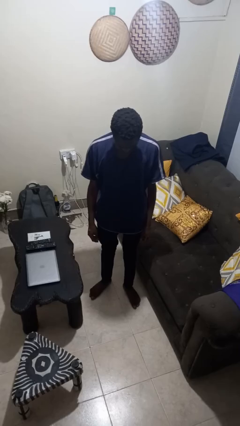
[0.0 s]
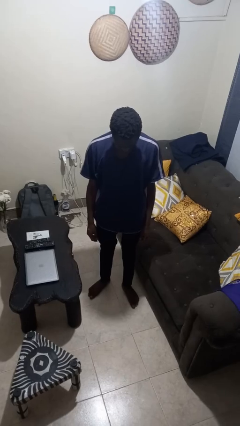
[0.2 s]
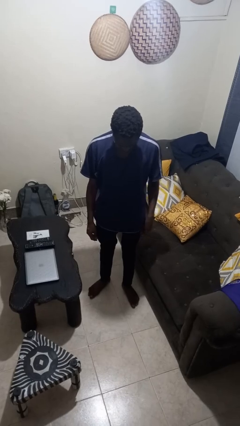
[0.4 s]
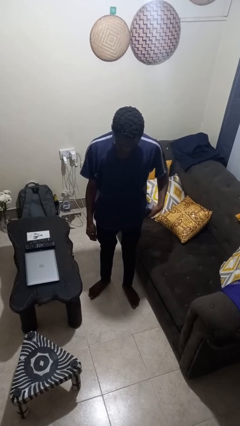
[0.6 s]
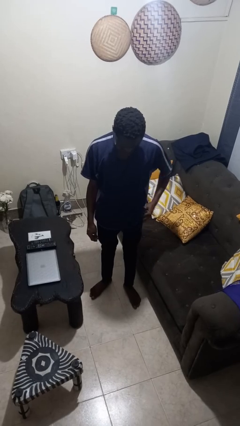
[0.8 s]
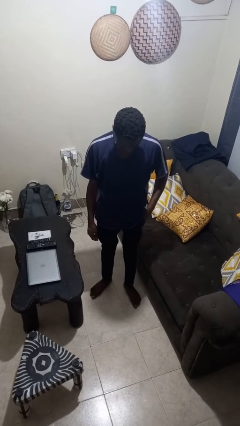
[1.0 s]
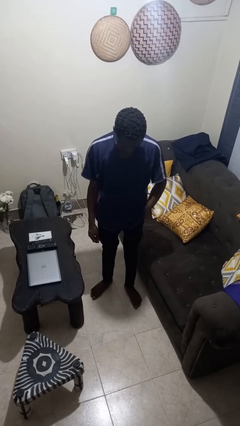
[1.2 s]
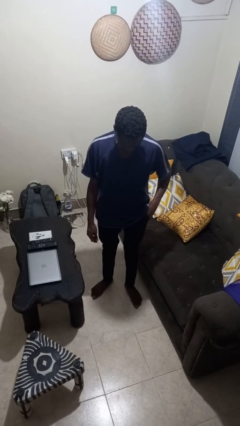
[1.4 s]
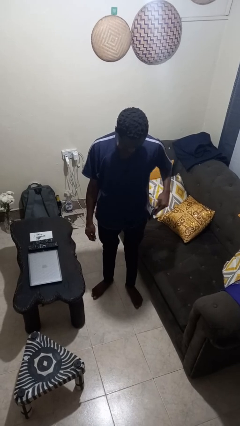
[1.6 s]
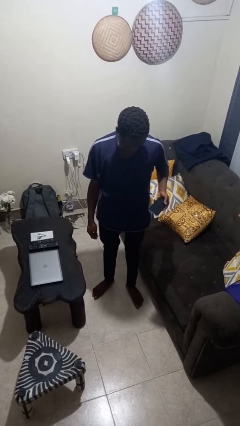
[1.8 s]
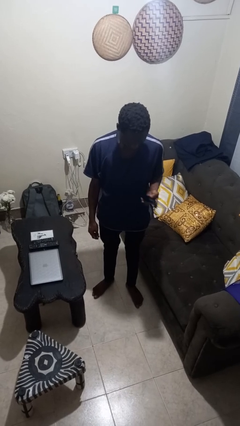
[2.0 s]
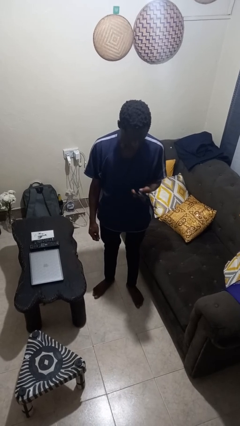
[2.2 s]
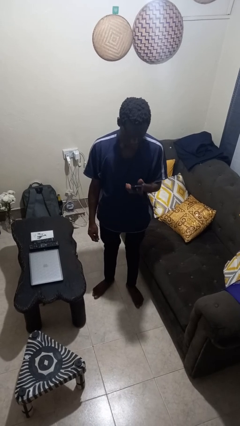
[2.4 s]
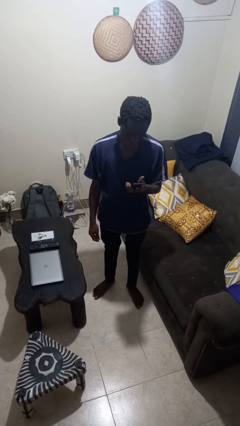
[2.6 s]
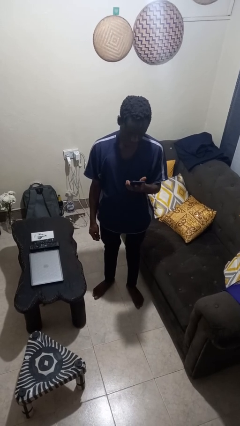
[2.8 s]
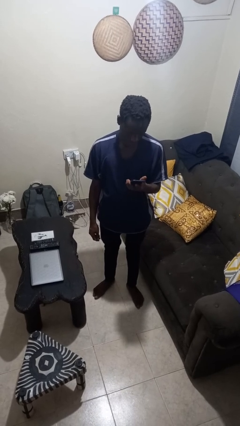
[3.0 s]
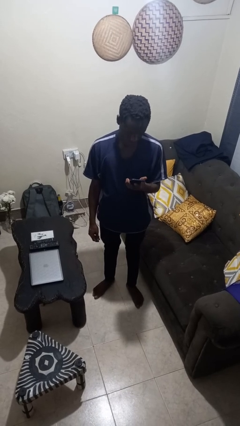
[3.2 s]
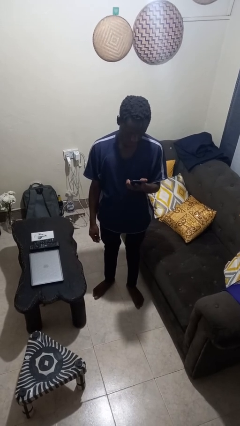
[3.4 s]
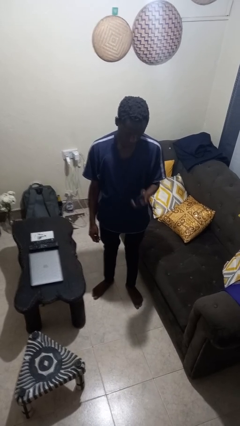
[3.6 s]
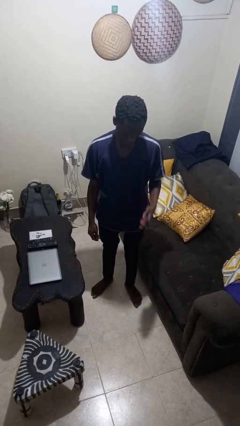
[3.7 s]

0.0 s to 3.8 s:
person takes phone from pocket

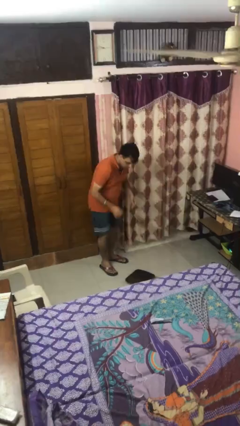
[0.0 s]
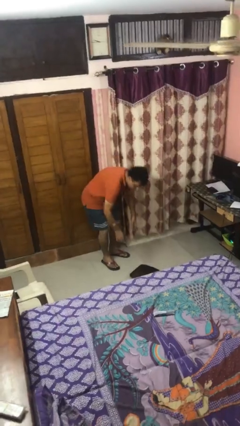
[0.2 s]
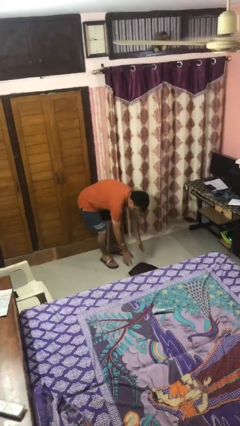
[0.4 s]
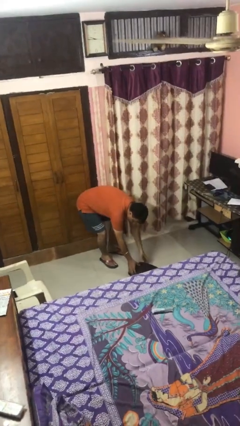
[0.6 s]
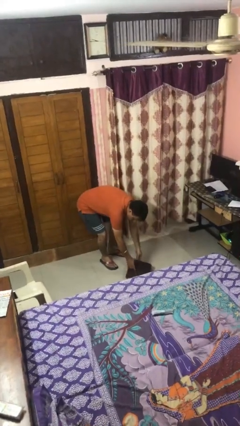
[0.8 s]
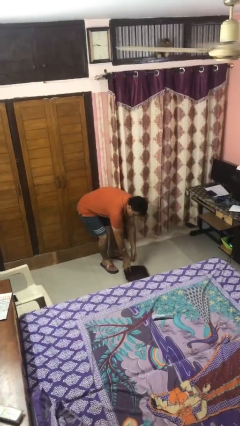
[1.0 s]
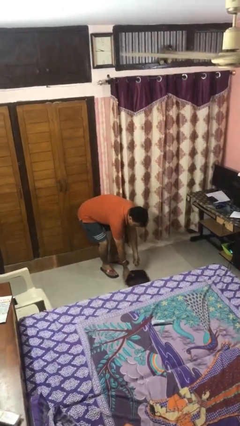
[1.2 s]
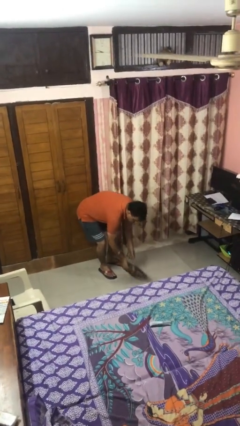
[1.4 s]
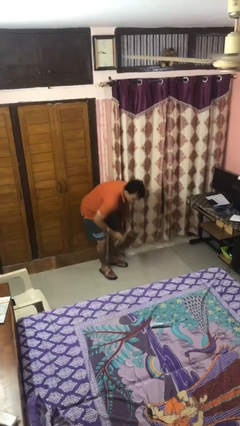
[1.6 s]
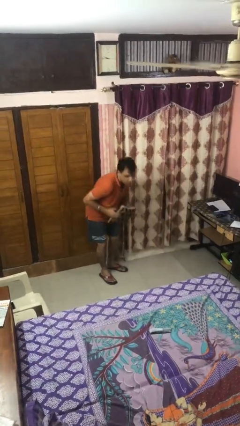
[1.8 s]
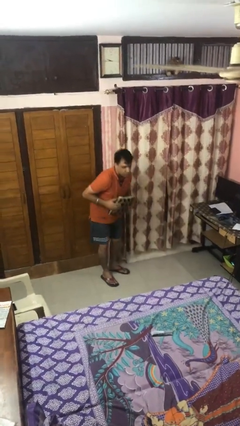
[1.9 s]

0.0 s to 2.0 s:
person picks up object from floor

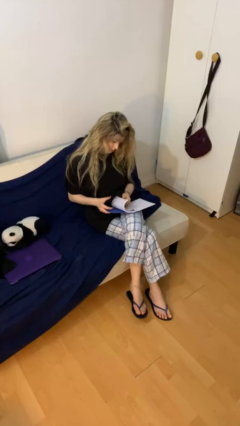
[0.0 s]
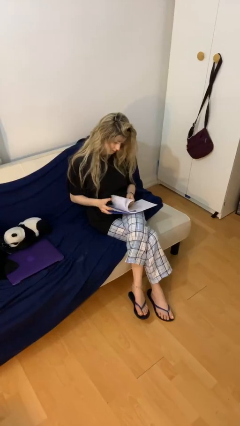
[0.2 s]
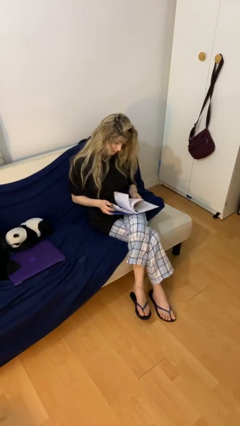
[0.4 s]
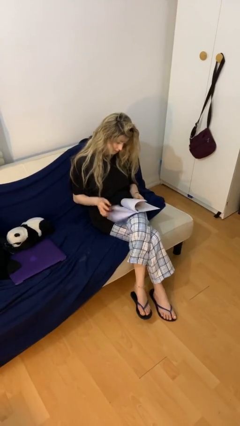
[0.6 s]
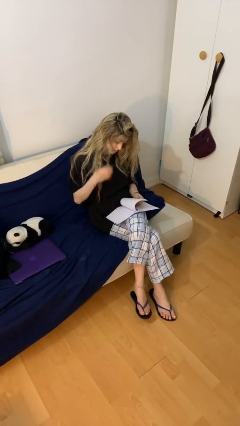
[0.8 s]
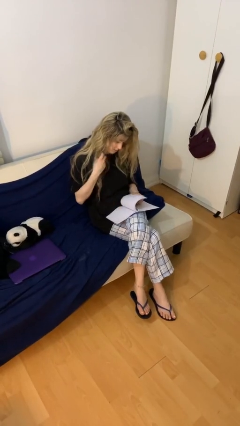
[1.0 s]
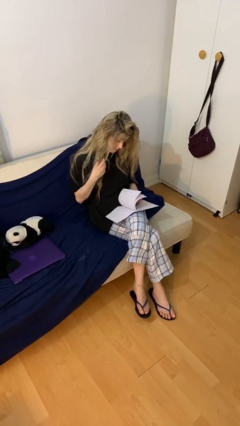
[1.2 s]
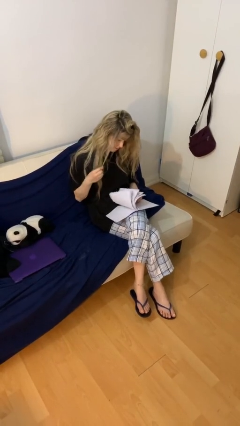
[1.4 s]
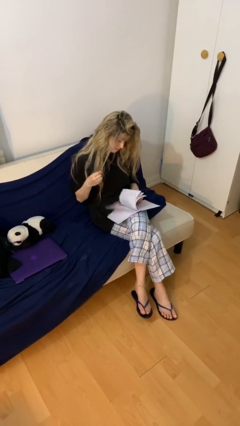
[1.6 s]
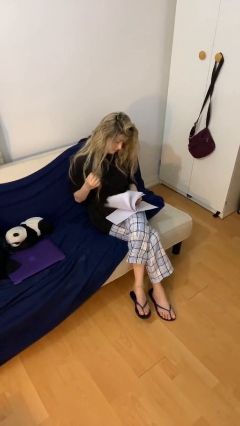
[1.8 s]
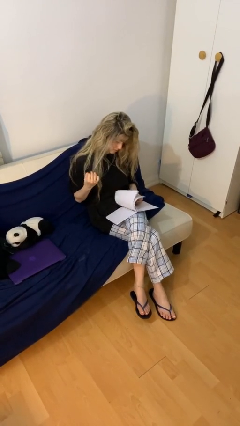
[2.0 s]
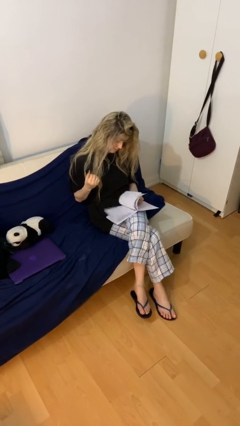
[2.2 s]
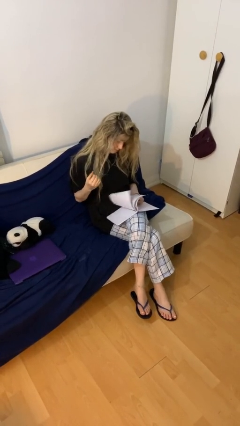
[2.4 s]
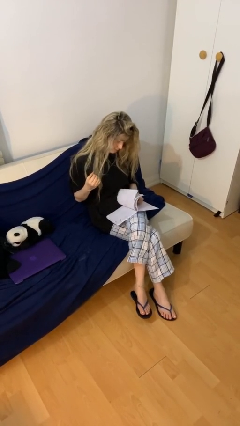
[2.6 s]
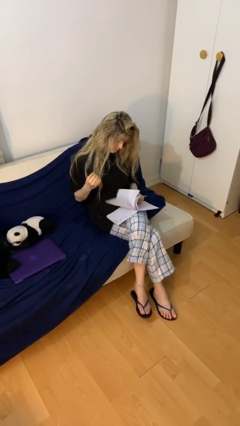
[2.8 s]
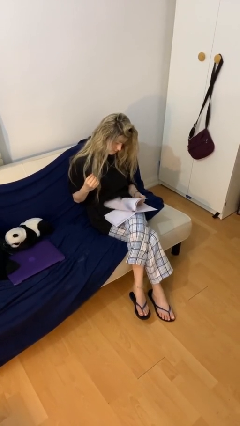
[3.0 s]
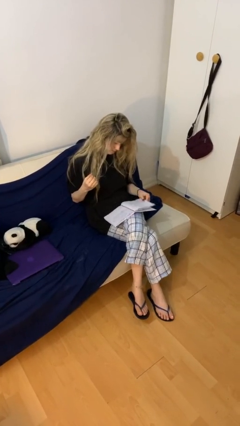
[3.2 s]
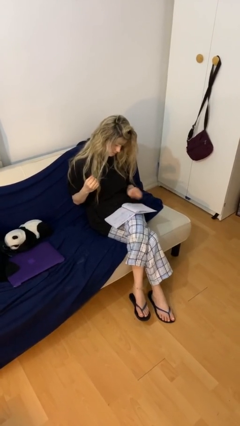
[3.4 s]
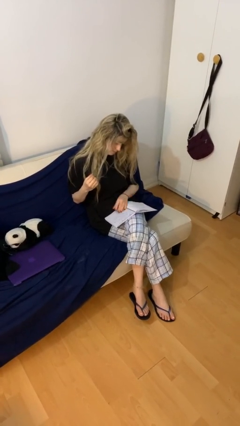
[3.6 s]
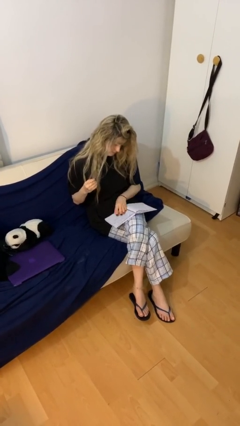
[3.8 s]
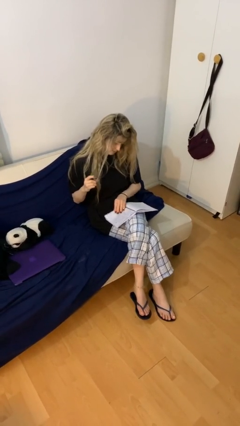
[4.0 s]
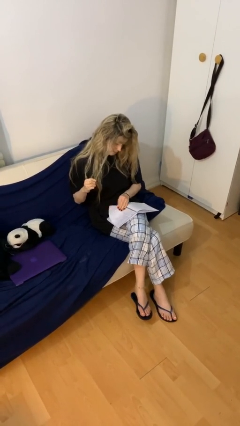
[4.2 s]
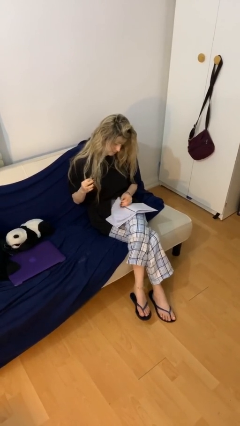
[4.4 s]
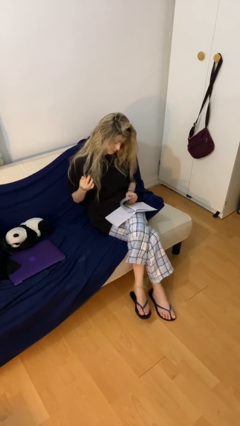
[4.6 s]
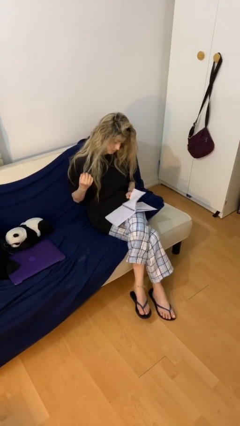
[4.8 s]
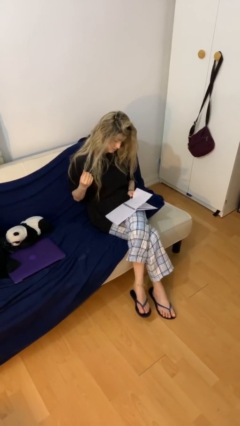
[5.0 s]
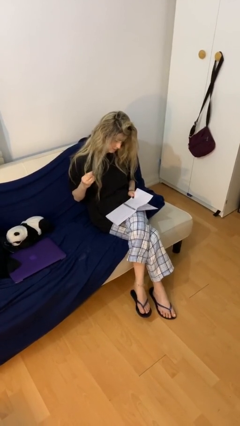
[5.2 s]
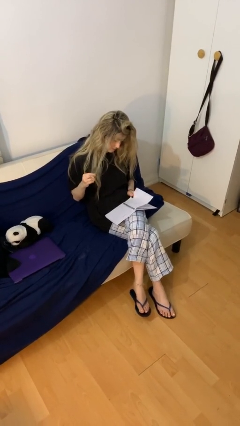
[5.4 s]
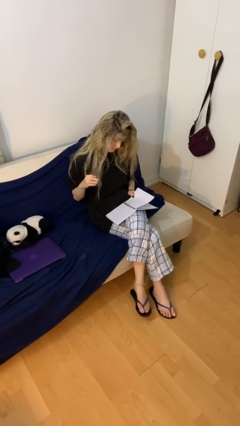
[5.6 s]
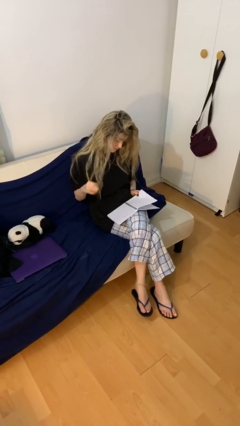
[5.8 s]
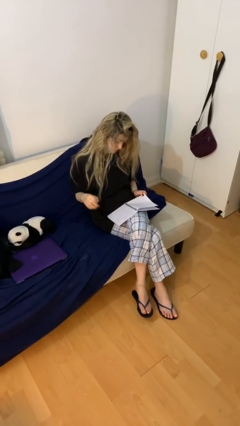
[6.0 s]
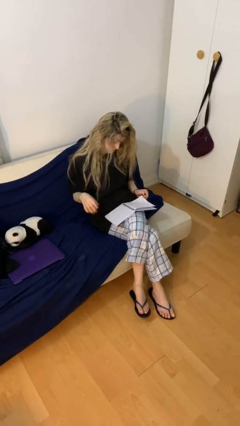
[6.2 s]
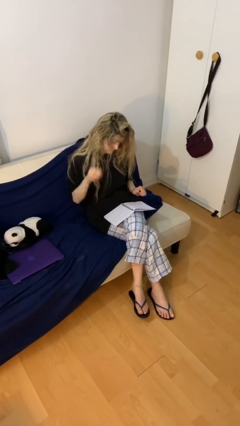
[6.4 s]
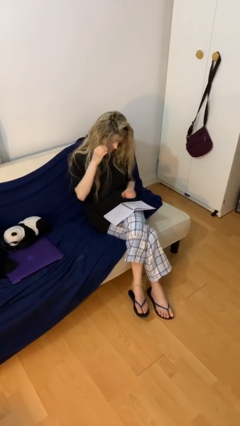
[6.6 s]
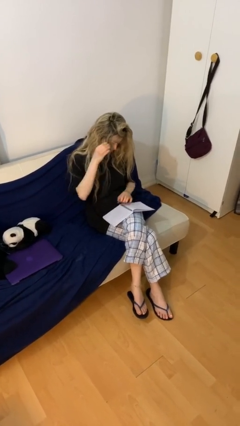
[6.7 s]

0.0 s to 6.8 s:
person reads document

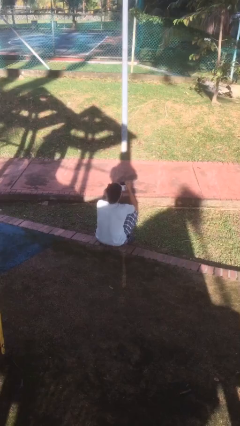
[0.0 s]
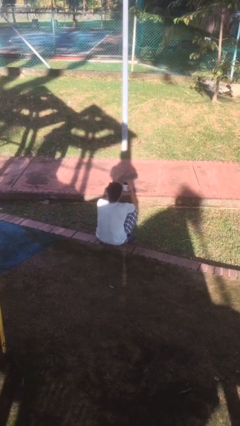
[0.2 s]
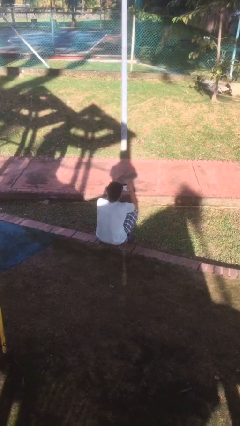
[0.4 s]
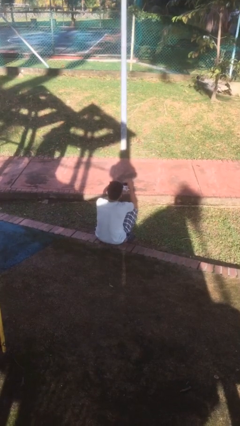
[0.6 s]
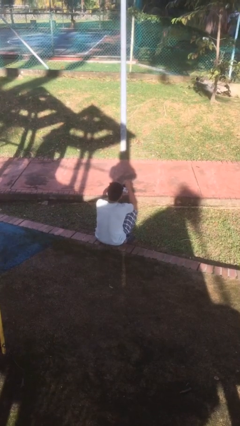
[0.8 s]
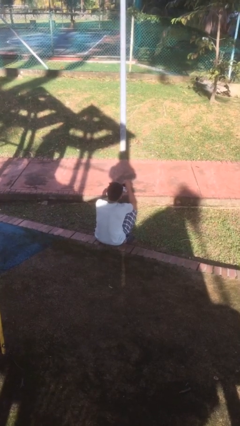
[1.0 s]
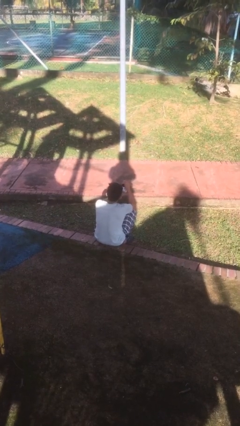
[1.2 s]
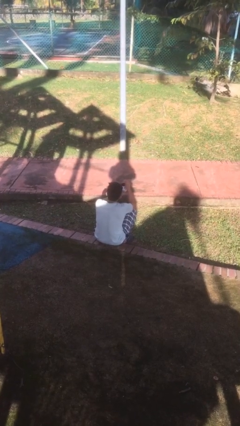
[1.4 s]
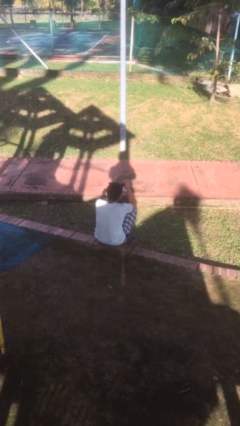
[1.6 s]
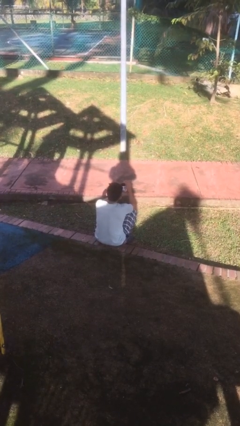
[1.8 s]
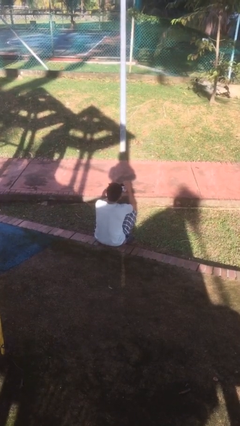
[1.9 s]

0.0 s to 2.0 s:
person stirs mug

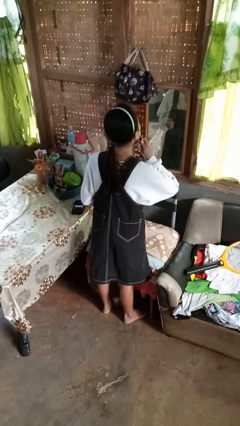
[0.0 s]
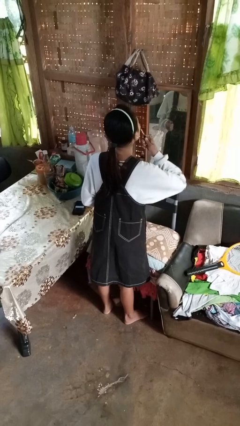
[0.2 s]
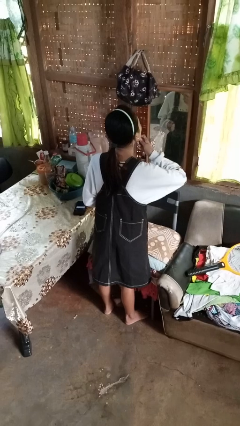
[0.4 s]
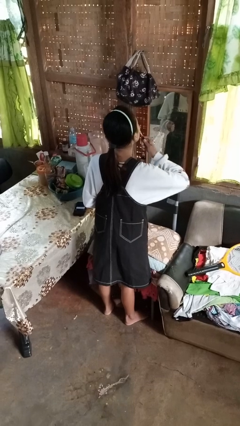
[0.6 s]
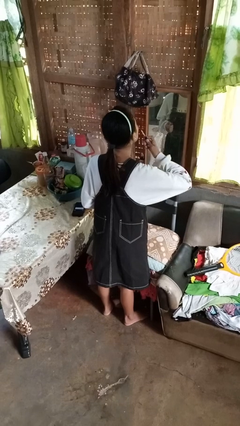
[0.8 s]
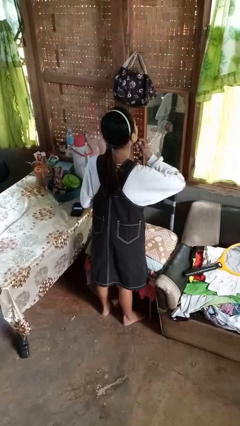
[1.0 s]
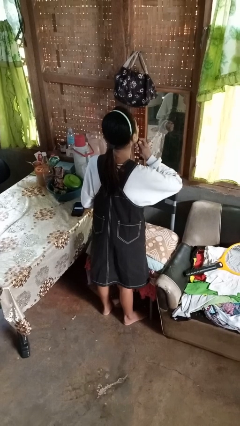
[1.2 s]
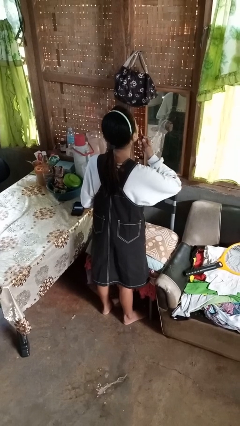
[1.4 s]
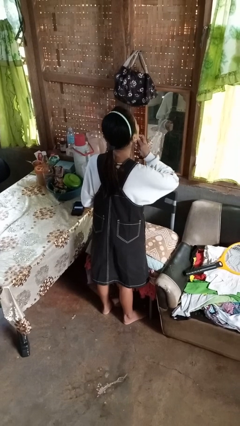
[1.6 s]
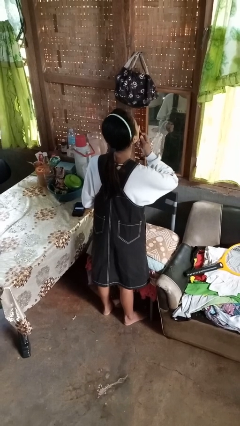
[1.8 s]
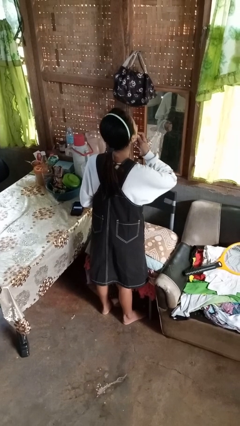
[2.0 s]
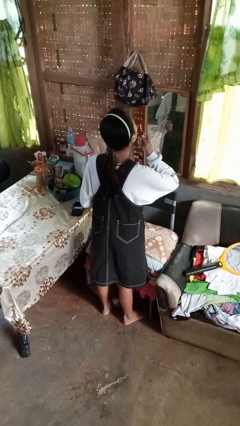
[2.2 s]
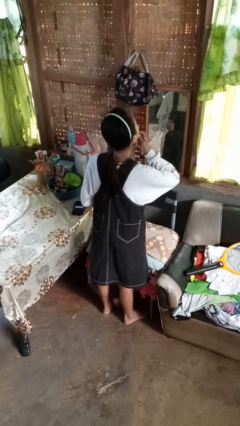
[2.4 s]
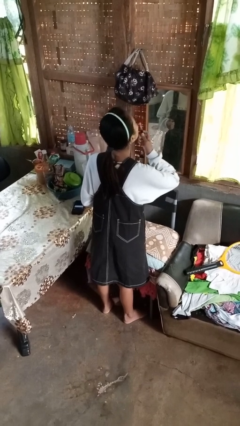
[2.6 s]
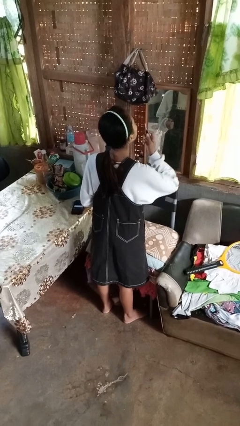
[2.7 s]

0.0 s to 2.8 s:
person applies lip makeup
